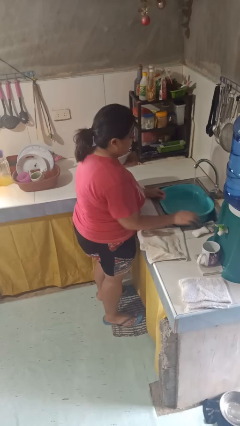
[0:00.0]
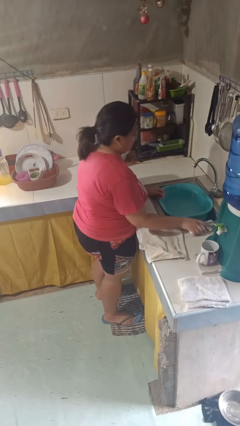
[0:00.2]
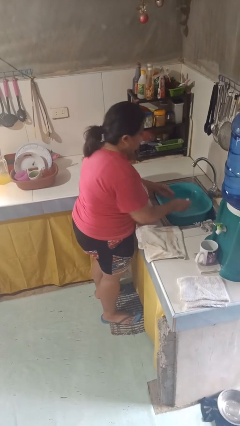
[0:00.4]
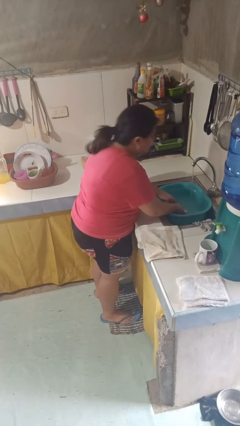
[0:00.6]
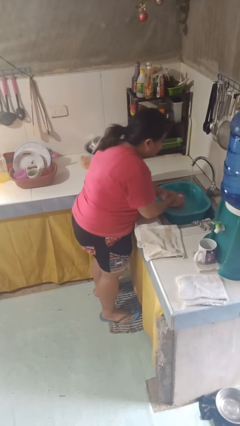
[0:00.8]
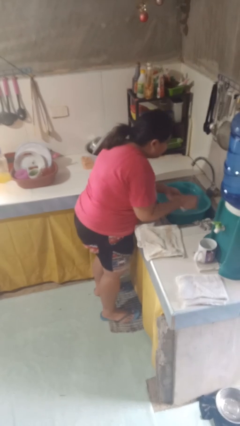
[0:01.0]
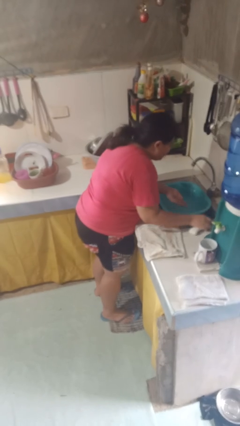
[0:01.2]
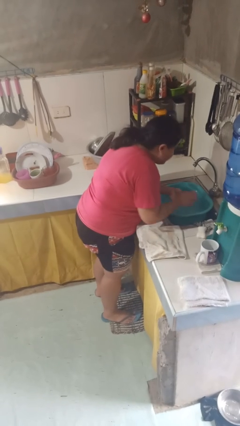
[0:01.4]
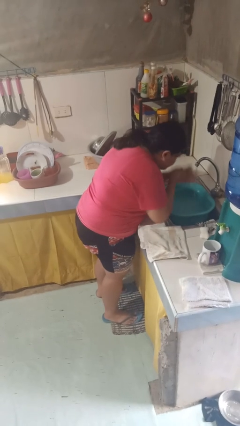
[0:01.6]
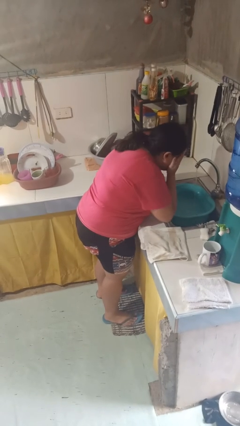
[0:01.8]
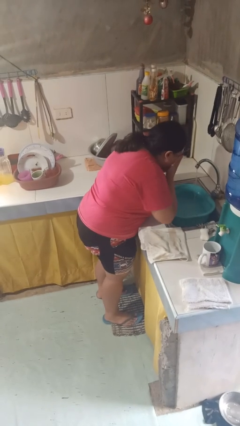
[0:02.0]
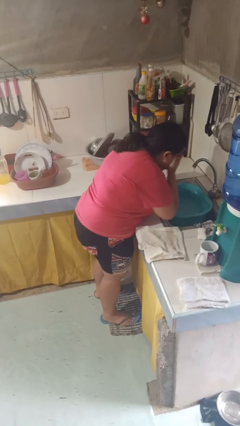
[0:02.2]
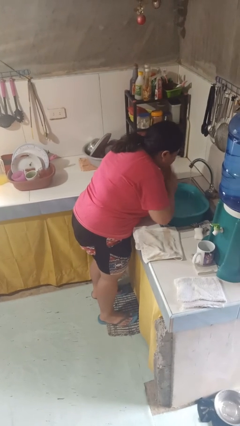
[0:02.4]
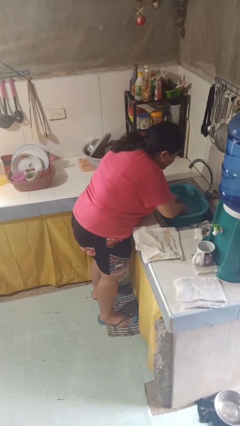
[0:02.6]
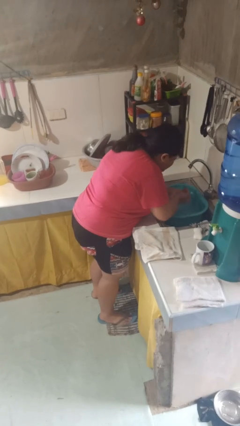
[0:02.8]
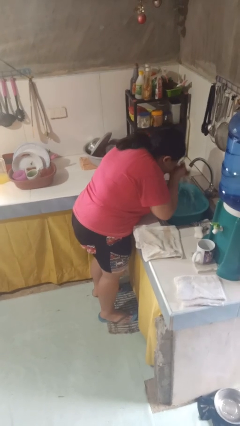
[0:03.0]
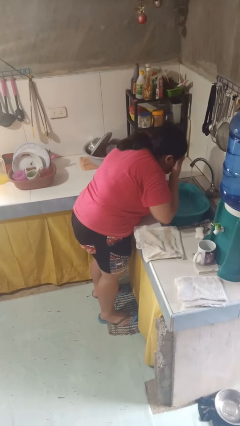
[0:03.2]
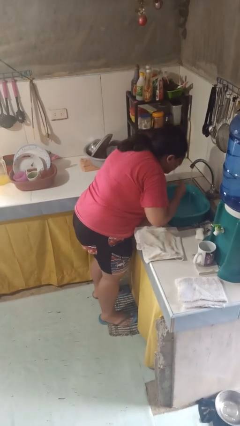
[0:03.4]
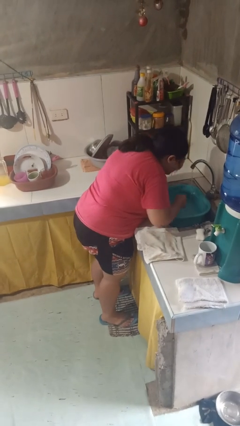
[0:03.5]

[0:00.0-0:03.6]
person washes face

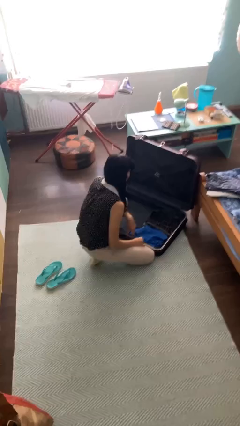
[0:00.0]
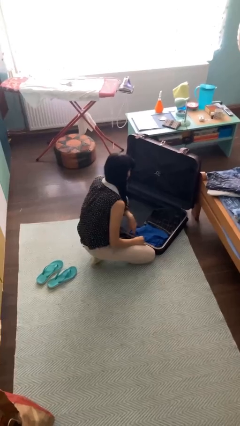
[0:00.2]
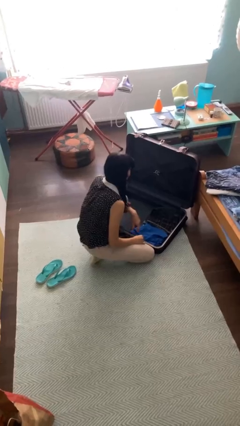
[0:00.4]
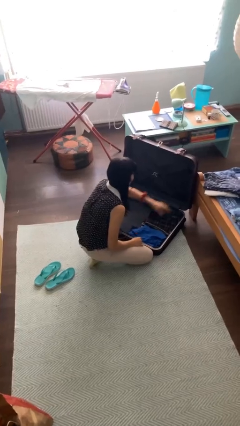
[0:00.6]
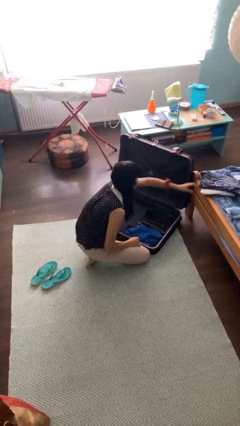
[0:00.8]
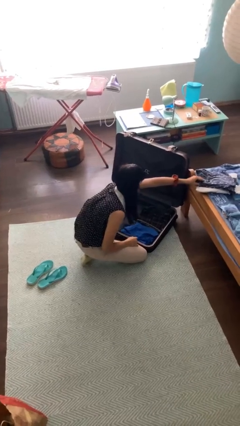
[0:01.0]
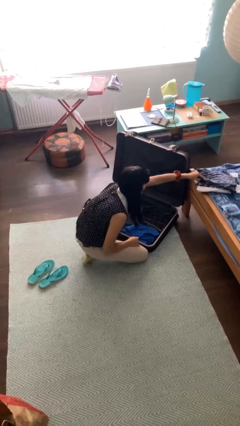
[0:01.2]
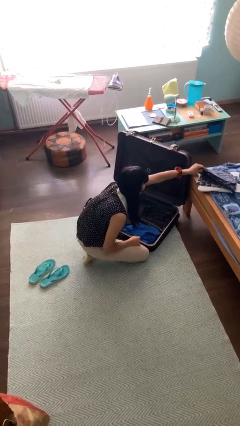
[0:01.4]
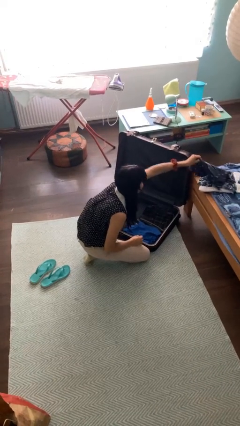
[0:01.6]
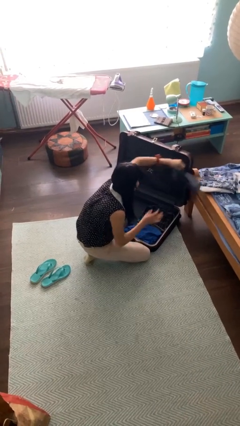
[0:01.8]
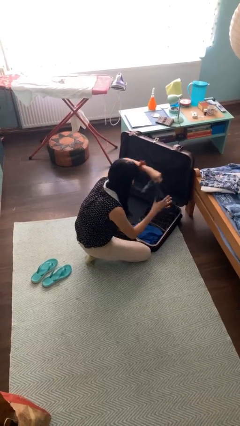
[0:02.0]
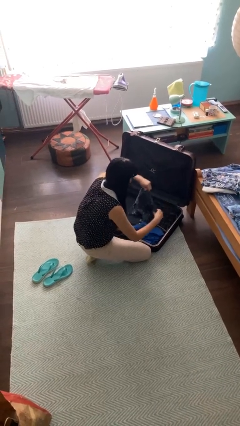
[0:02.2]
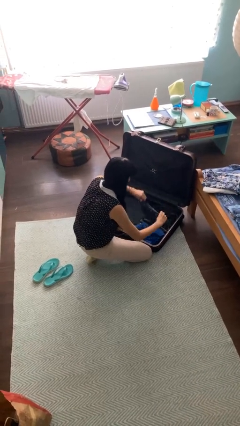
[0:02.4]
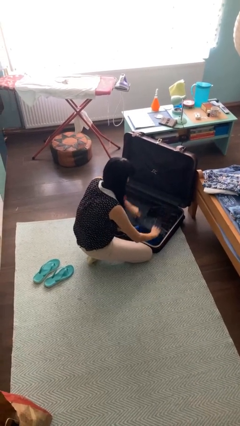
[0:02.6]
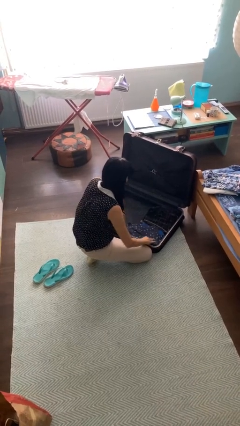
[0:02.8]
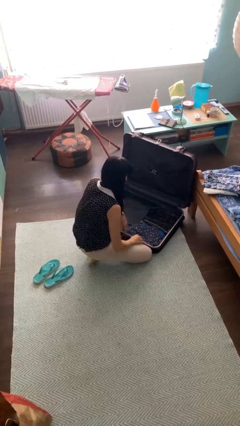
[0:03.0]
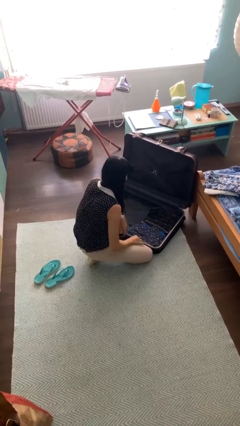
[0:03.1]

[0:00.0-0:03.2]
person loads clothes into suitcase

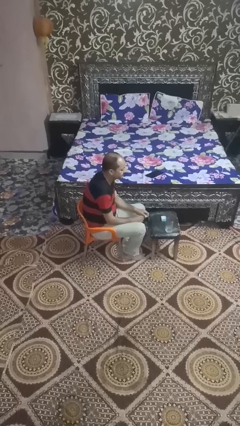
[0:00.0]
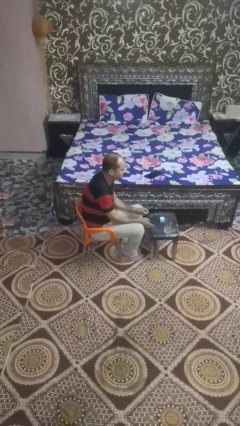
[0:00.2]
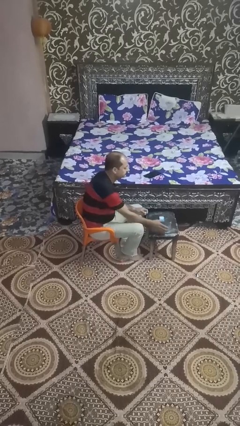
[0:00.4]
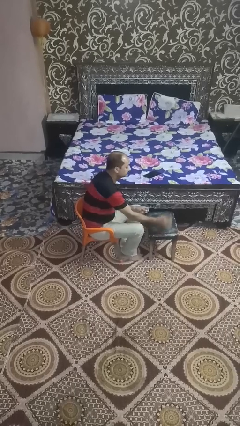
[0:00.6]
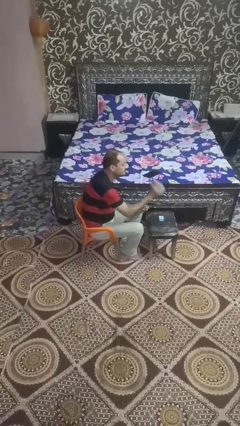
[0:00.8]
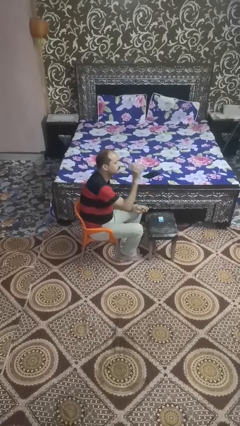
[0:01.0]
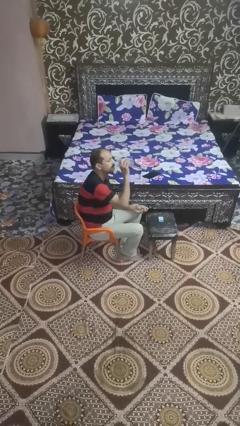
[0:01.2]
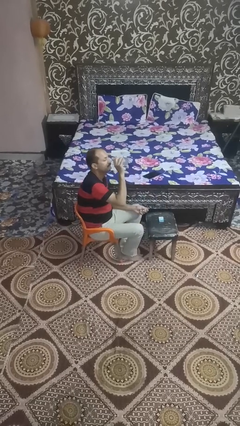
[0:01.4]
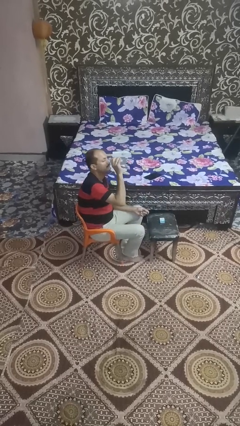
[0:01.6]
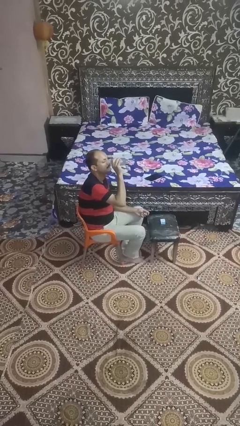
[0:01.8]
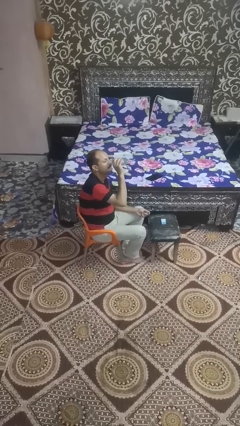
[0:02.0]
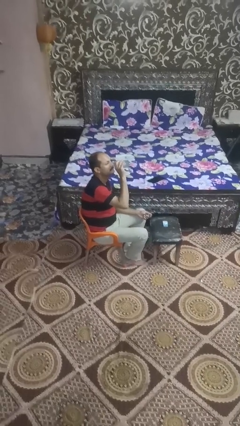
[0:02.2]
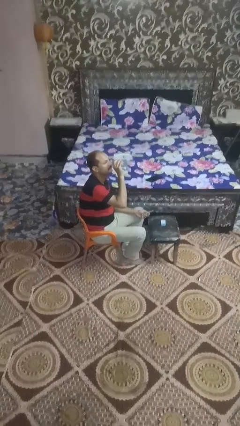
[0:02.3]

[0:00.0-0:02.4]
person sets upright glass

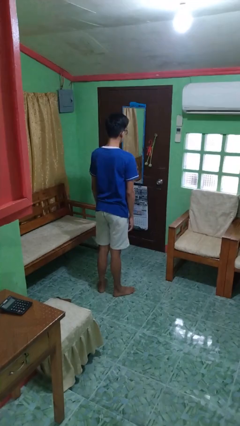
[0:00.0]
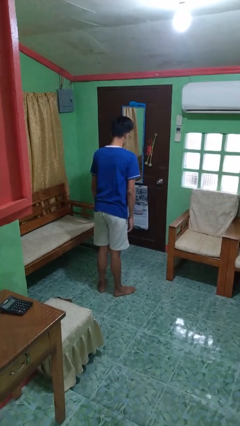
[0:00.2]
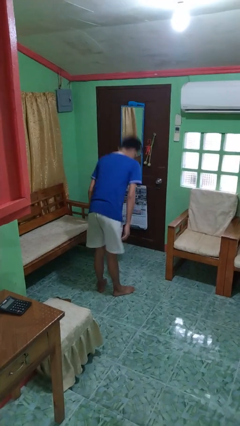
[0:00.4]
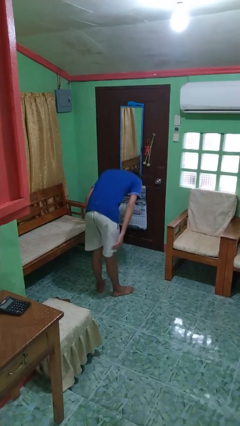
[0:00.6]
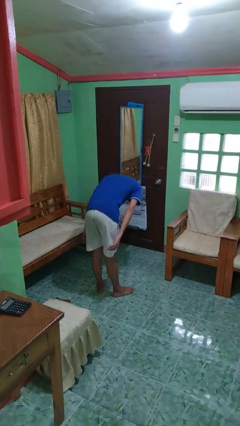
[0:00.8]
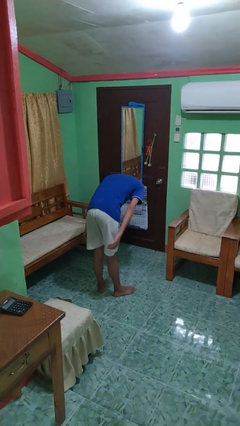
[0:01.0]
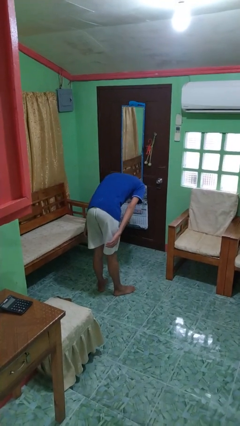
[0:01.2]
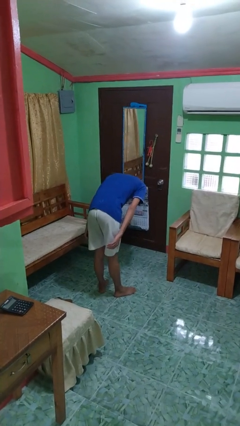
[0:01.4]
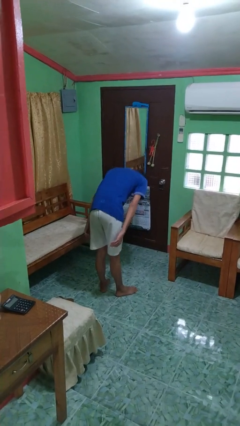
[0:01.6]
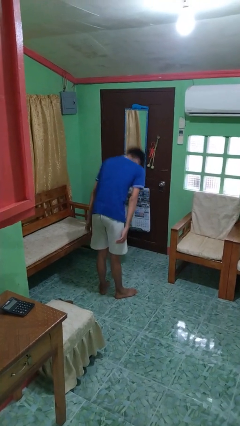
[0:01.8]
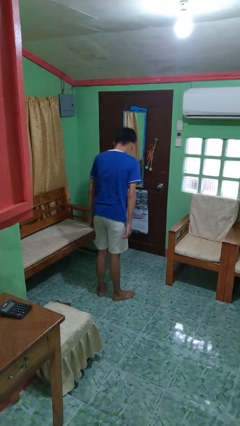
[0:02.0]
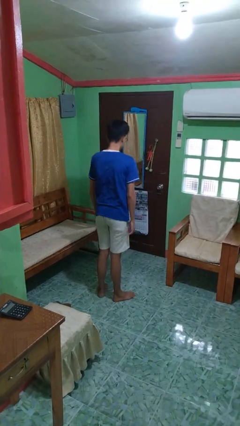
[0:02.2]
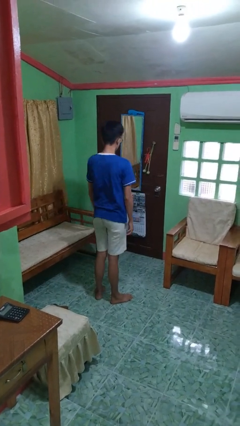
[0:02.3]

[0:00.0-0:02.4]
person bows

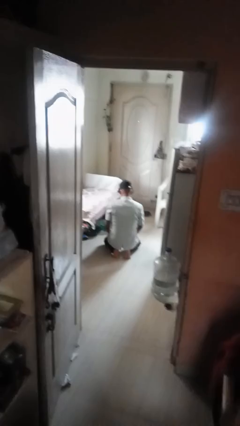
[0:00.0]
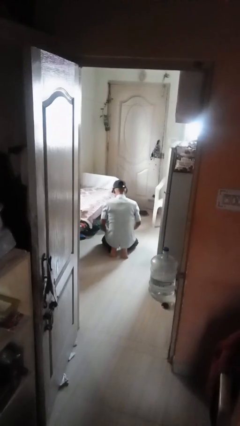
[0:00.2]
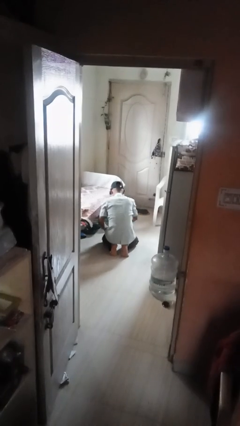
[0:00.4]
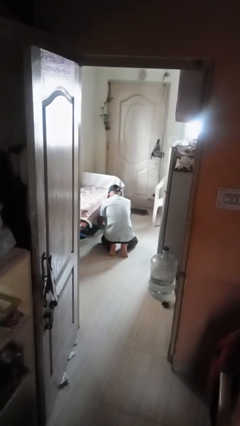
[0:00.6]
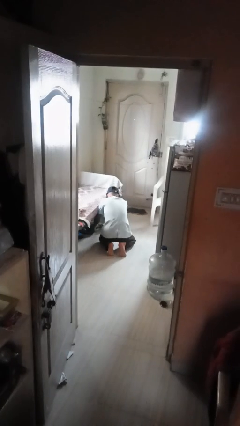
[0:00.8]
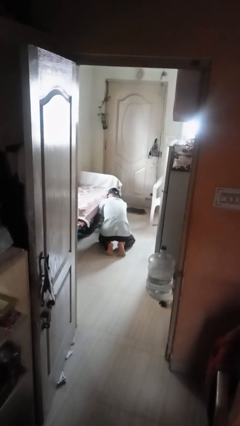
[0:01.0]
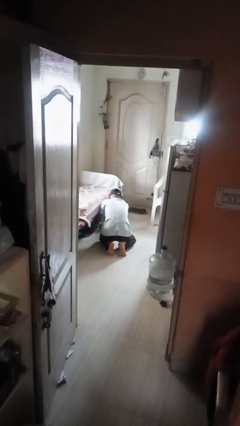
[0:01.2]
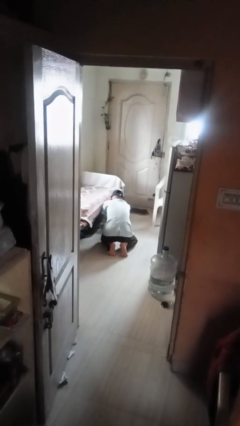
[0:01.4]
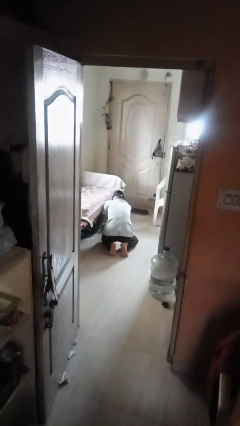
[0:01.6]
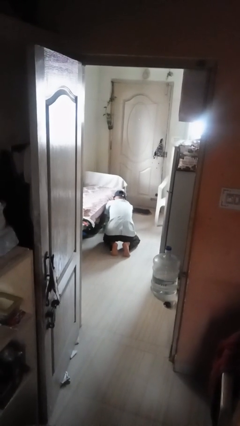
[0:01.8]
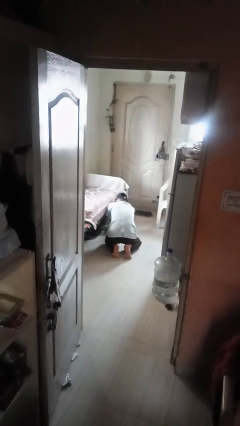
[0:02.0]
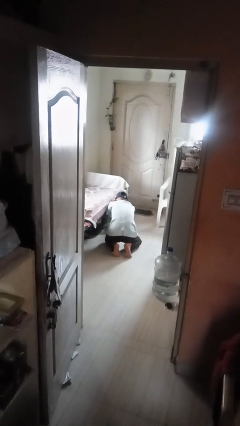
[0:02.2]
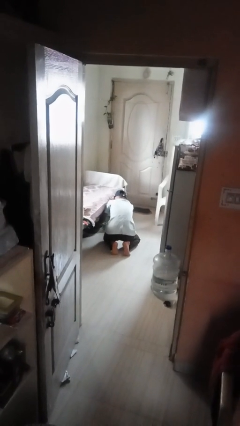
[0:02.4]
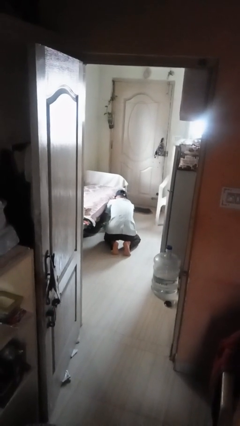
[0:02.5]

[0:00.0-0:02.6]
person searches under bed

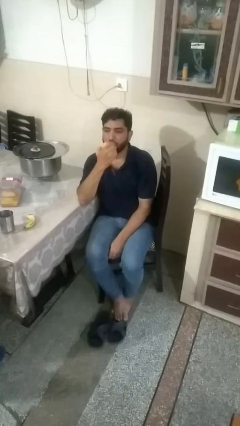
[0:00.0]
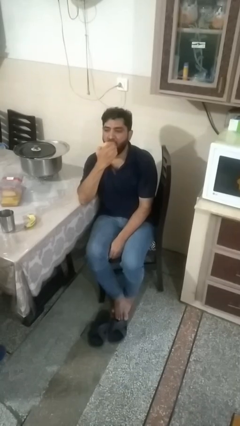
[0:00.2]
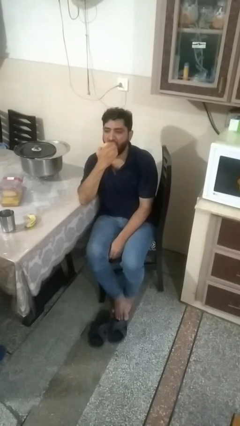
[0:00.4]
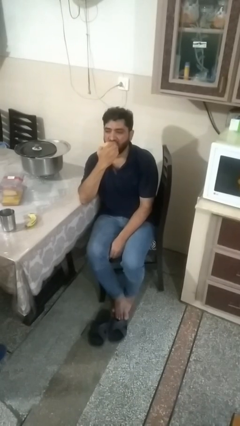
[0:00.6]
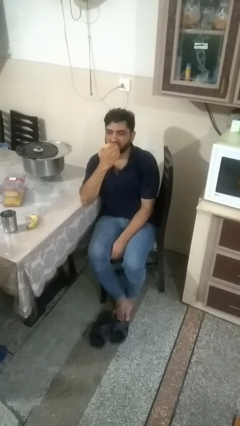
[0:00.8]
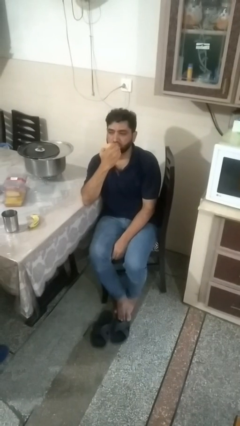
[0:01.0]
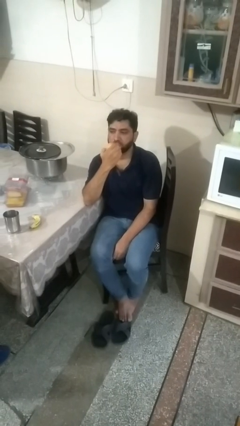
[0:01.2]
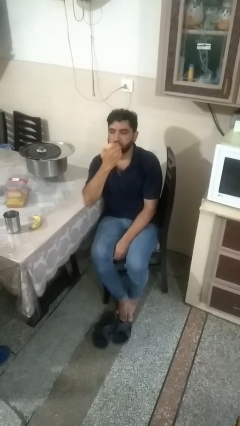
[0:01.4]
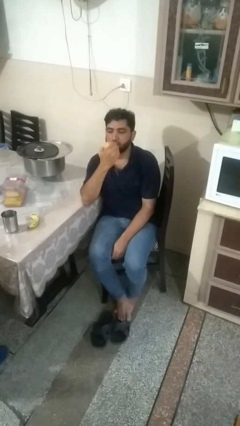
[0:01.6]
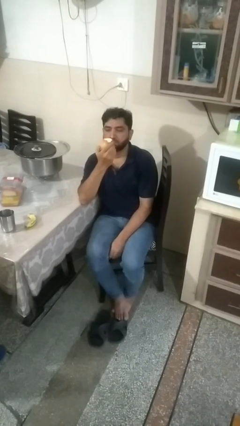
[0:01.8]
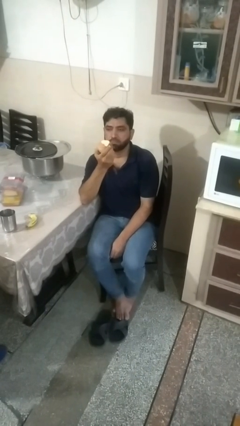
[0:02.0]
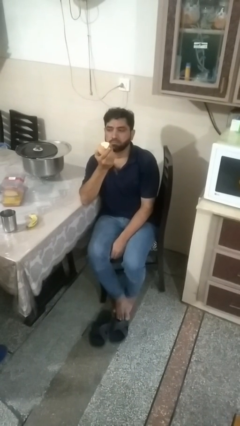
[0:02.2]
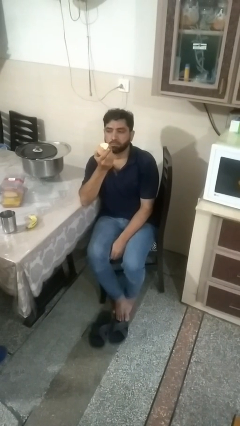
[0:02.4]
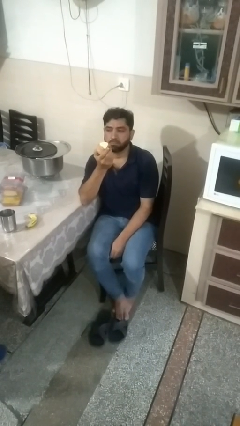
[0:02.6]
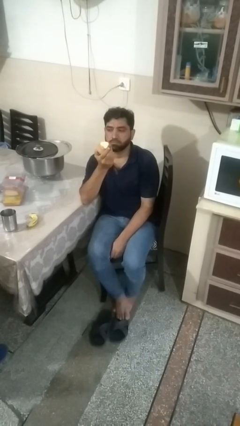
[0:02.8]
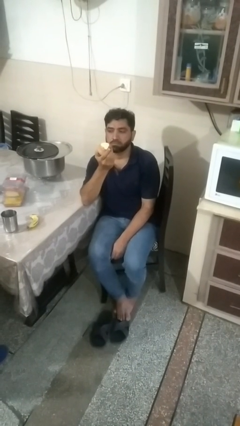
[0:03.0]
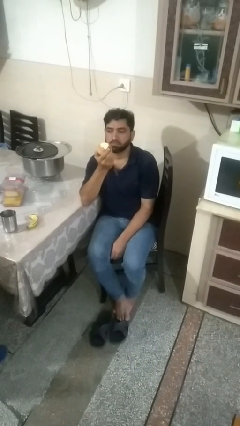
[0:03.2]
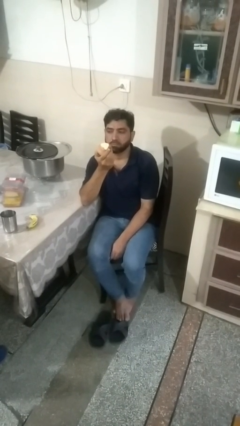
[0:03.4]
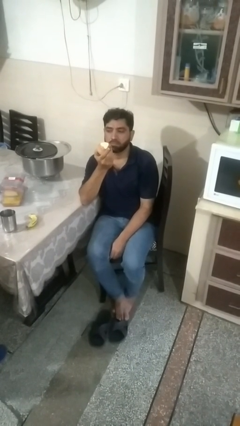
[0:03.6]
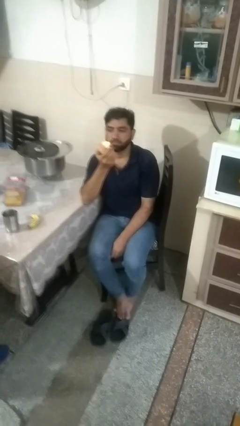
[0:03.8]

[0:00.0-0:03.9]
person eats apple
